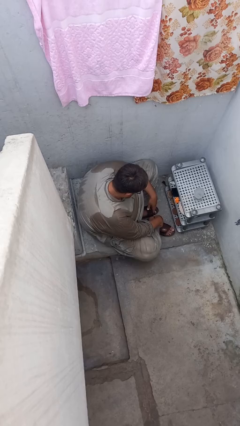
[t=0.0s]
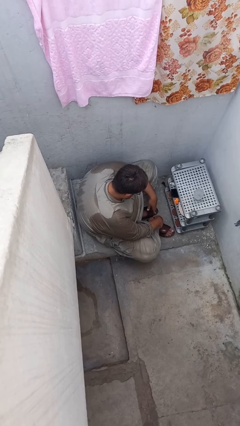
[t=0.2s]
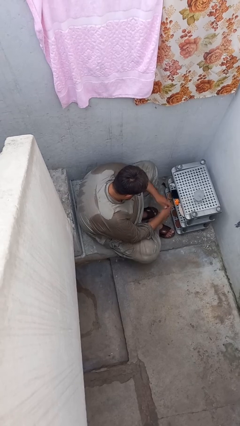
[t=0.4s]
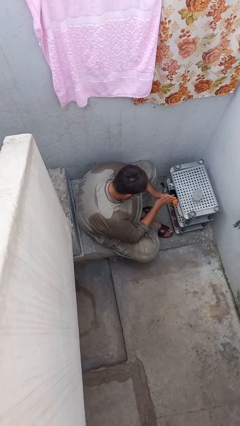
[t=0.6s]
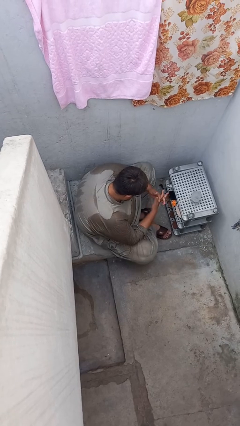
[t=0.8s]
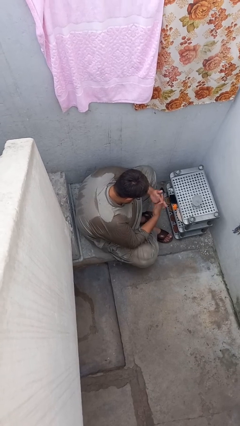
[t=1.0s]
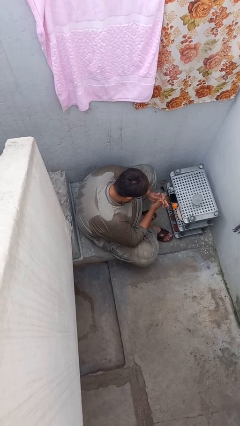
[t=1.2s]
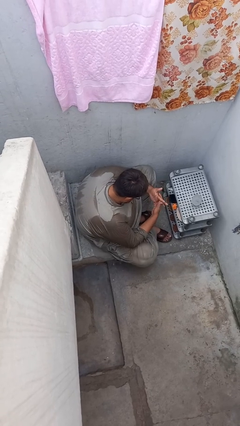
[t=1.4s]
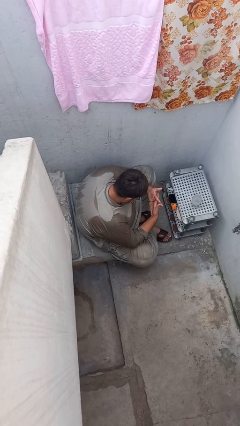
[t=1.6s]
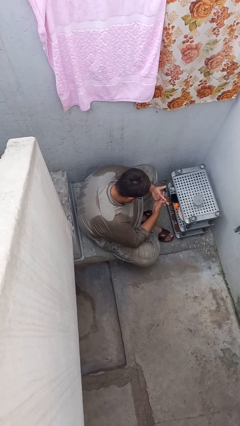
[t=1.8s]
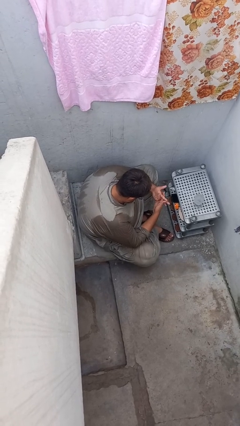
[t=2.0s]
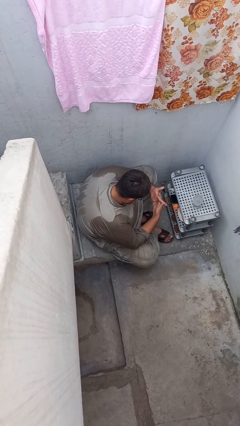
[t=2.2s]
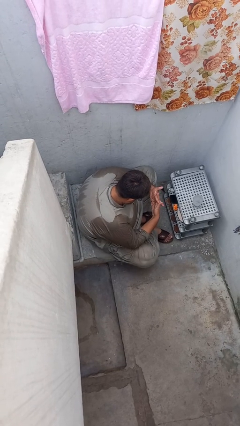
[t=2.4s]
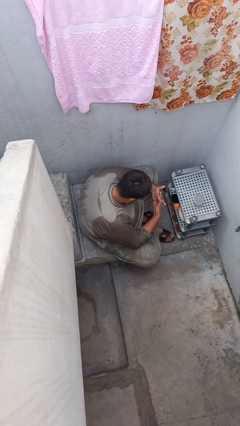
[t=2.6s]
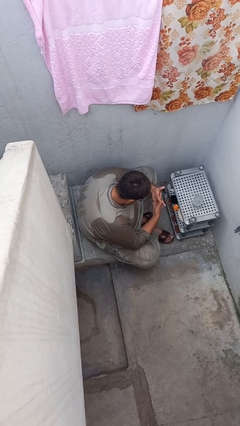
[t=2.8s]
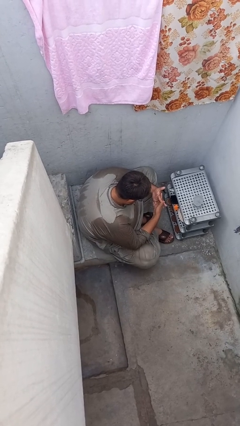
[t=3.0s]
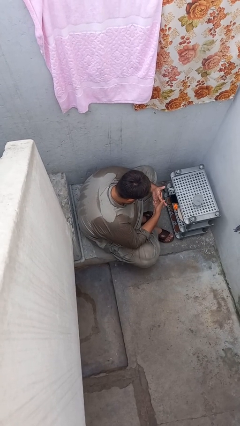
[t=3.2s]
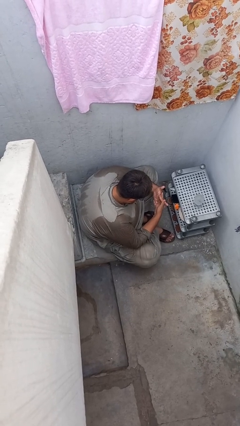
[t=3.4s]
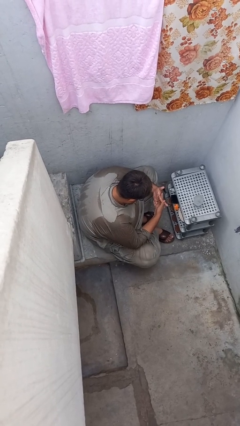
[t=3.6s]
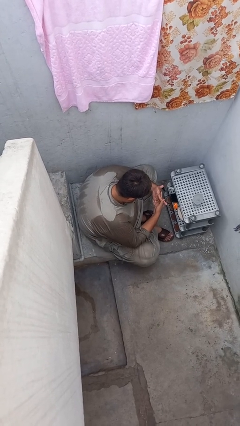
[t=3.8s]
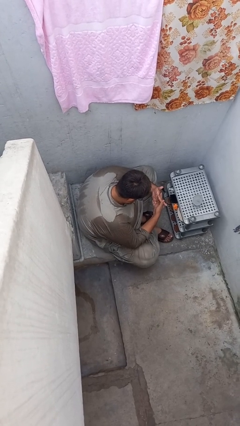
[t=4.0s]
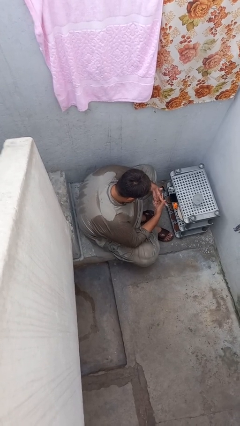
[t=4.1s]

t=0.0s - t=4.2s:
person snaps fingers

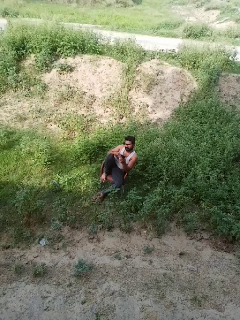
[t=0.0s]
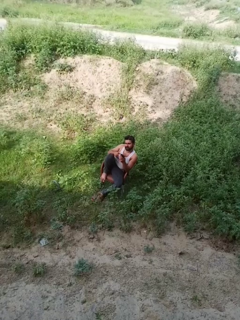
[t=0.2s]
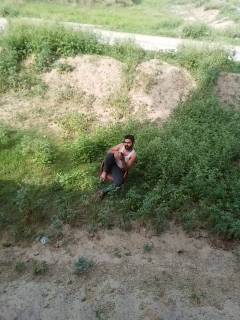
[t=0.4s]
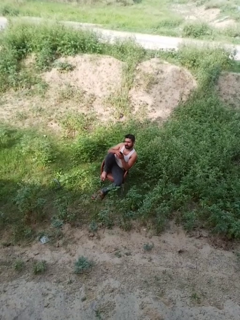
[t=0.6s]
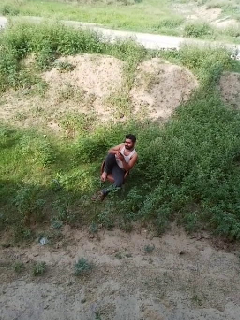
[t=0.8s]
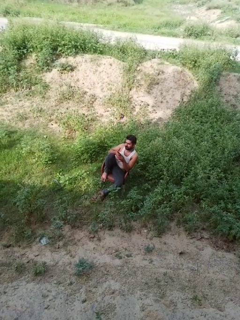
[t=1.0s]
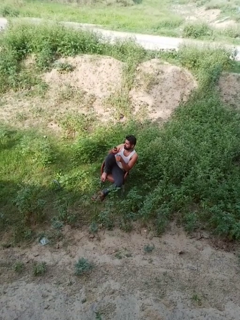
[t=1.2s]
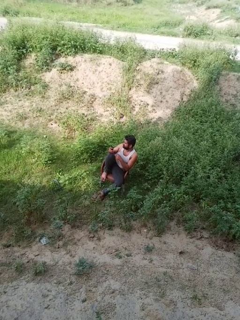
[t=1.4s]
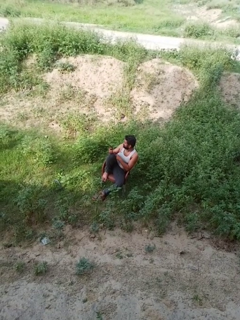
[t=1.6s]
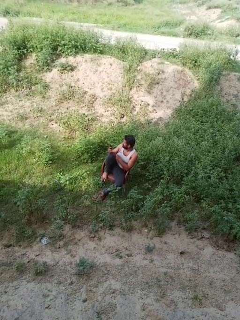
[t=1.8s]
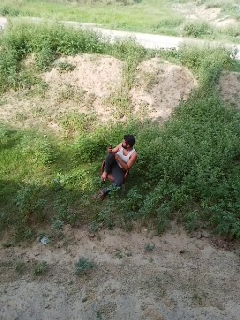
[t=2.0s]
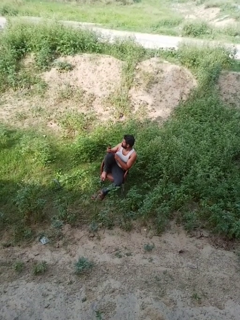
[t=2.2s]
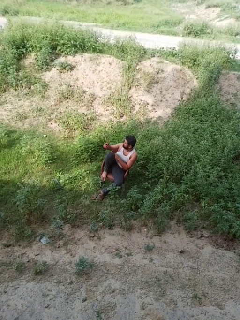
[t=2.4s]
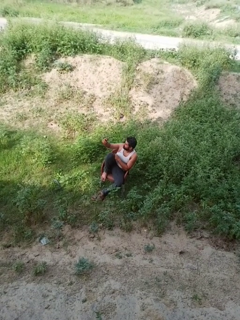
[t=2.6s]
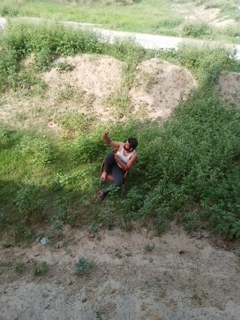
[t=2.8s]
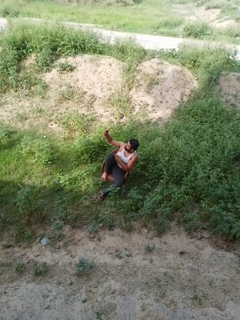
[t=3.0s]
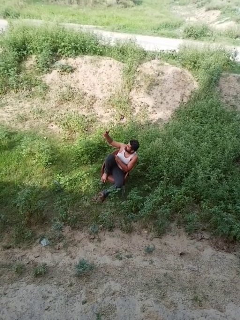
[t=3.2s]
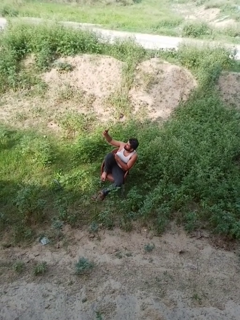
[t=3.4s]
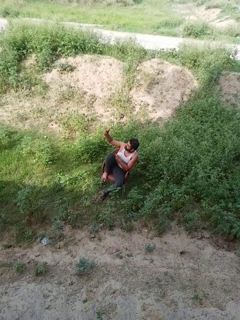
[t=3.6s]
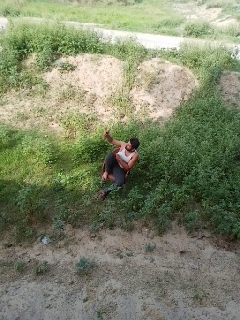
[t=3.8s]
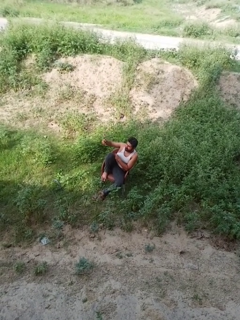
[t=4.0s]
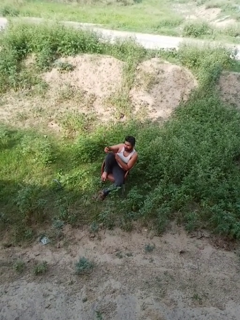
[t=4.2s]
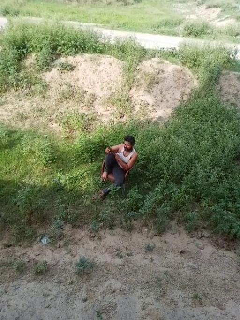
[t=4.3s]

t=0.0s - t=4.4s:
person takes selfie

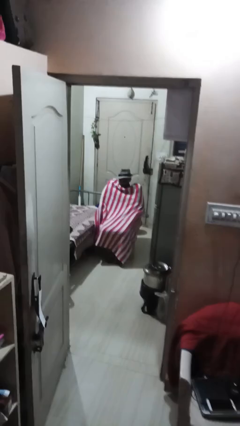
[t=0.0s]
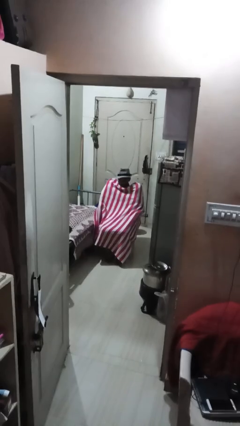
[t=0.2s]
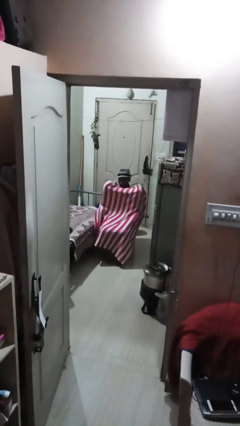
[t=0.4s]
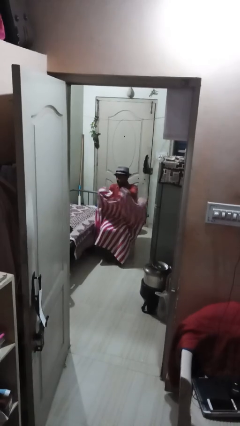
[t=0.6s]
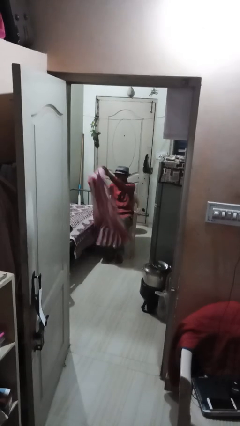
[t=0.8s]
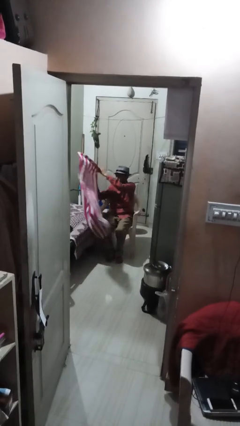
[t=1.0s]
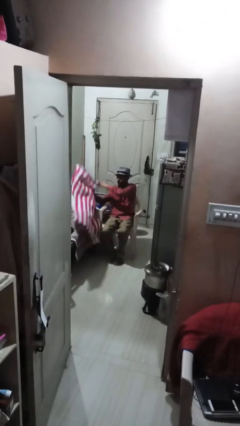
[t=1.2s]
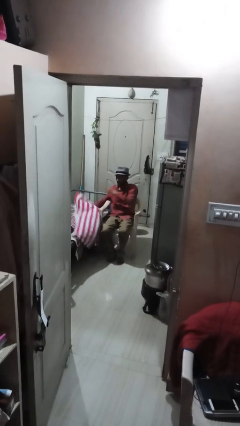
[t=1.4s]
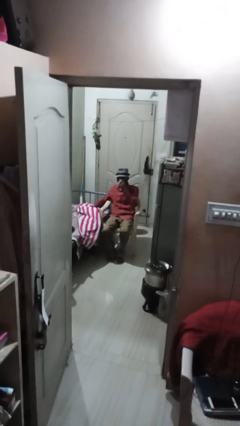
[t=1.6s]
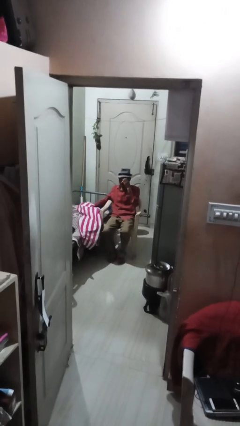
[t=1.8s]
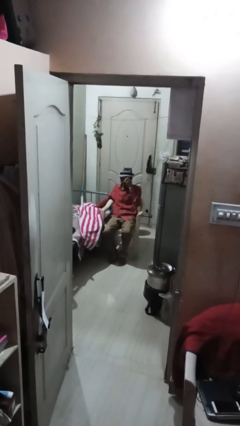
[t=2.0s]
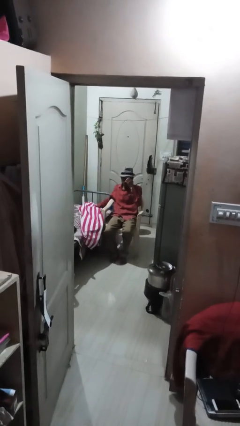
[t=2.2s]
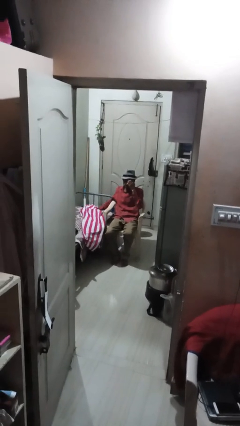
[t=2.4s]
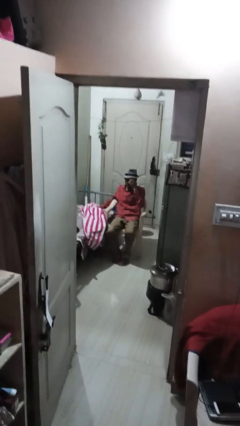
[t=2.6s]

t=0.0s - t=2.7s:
person uncovers with blanket

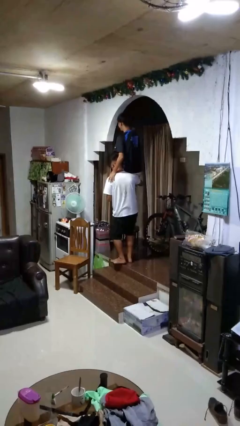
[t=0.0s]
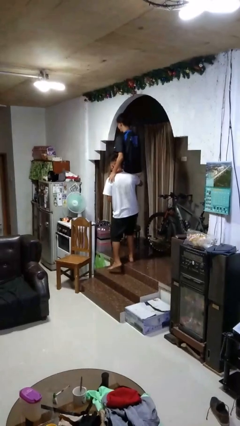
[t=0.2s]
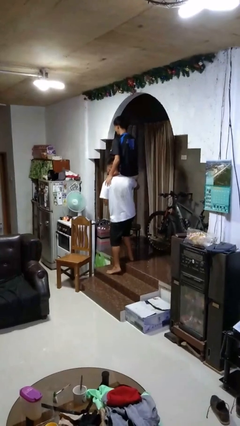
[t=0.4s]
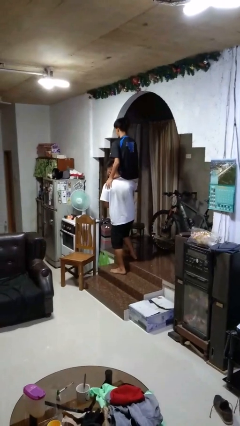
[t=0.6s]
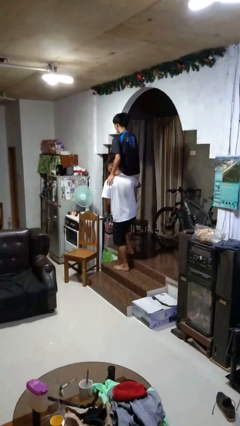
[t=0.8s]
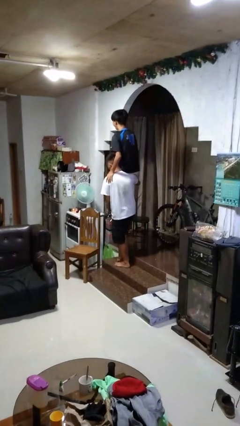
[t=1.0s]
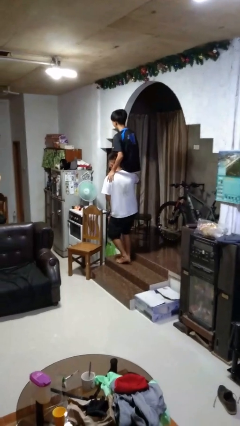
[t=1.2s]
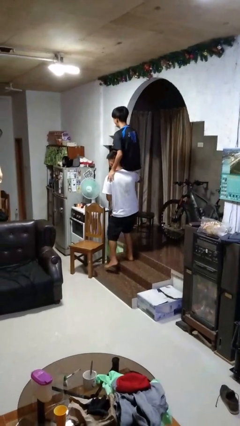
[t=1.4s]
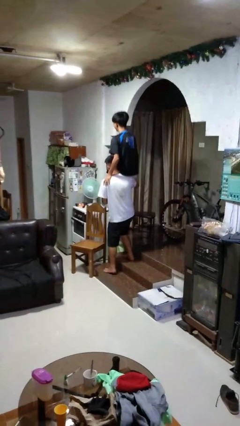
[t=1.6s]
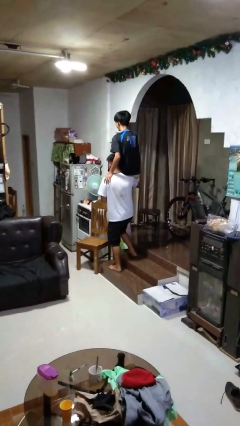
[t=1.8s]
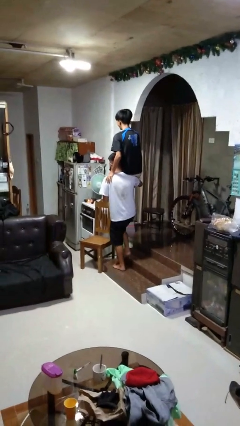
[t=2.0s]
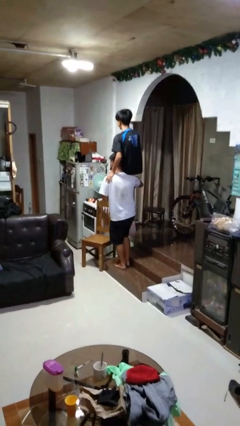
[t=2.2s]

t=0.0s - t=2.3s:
person carries person on shoulders

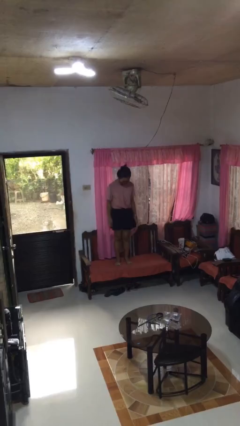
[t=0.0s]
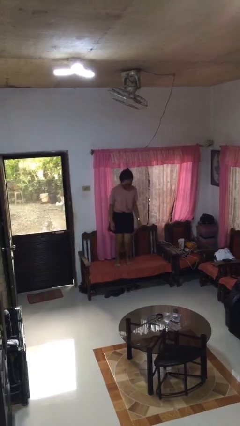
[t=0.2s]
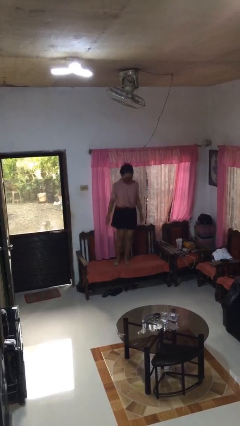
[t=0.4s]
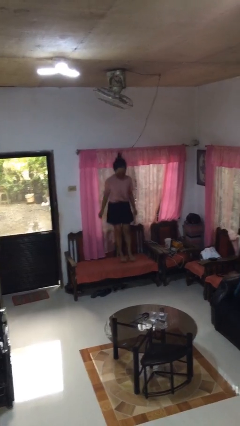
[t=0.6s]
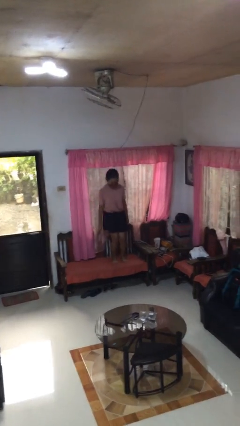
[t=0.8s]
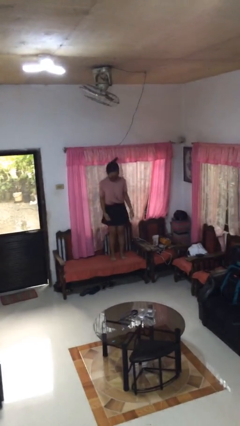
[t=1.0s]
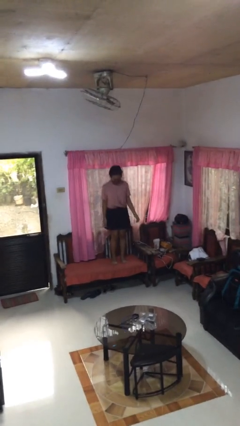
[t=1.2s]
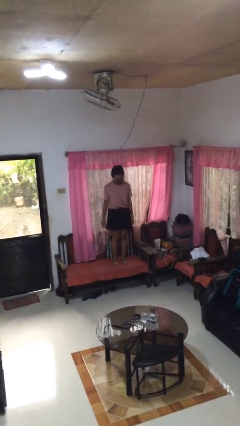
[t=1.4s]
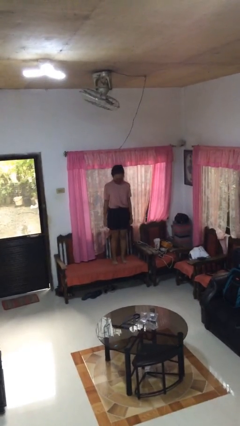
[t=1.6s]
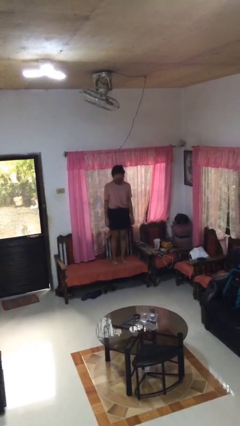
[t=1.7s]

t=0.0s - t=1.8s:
person jumps on couch

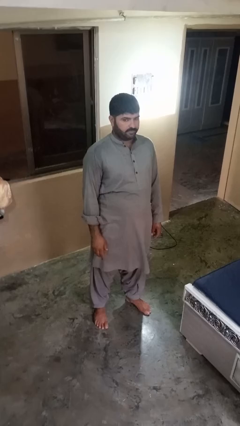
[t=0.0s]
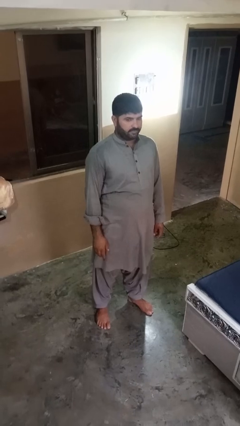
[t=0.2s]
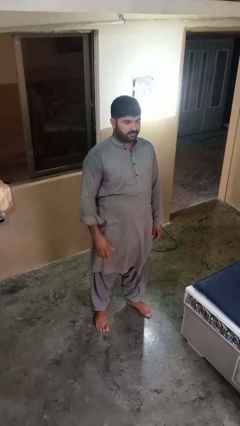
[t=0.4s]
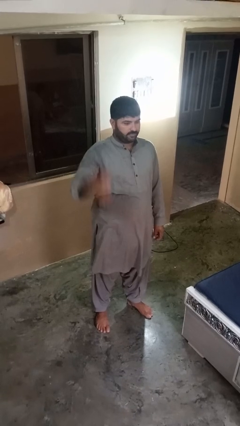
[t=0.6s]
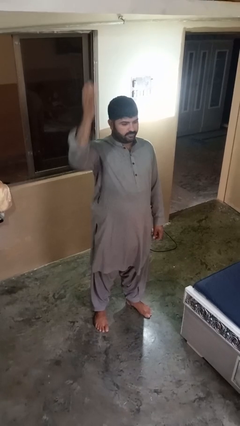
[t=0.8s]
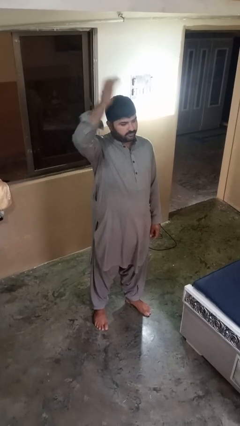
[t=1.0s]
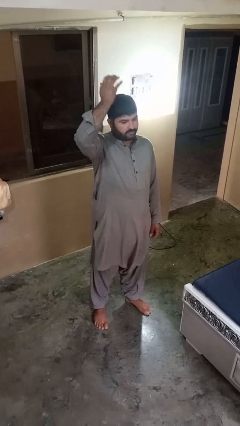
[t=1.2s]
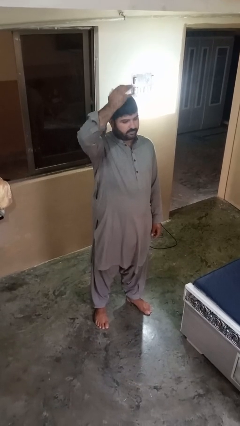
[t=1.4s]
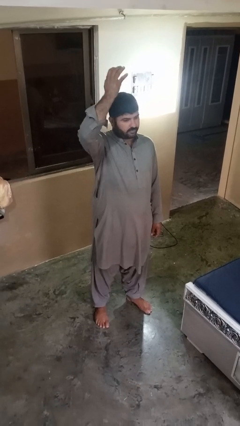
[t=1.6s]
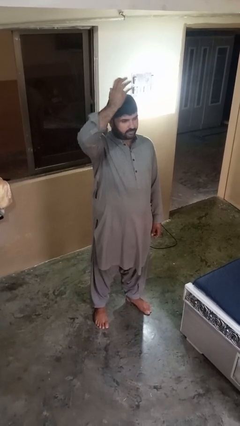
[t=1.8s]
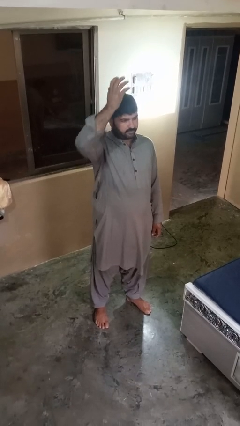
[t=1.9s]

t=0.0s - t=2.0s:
person pats head

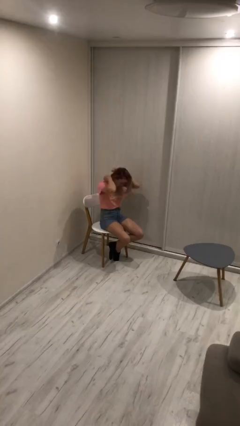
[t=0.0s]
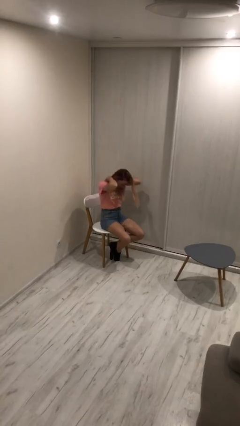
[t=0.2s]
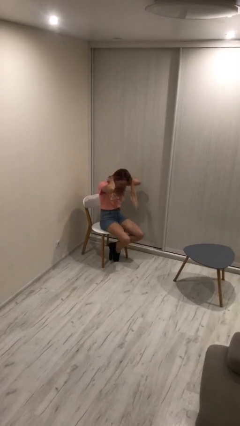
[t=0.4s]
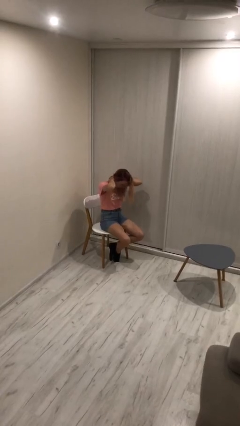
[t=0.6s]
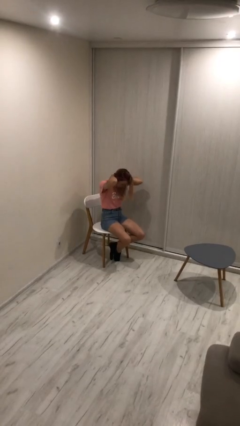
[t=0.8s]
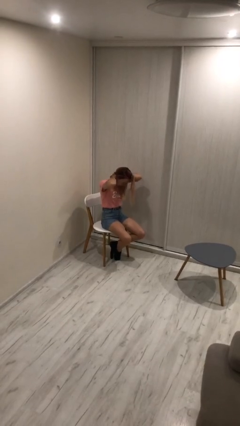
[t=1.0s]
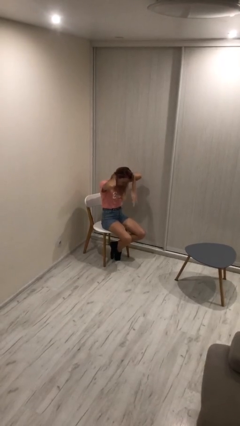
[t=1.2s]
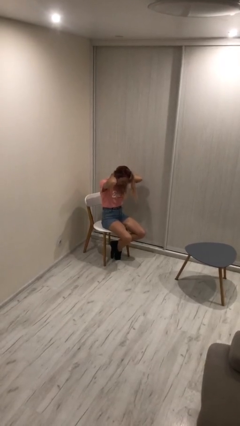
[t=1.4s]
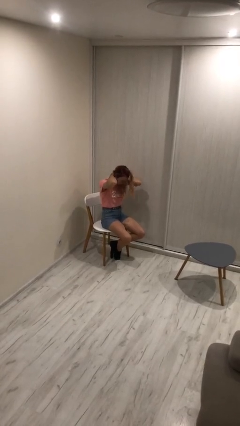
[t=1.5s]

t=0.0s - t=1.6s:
person rubs neck
